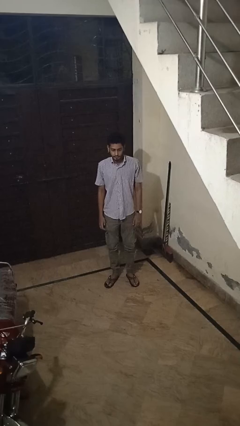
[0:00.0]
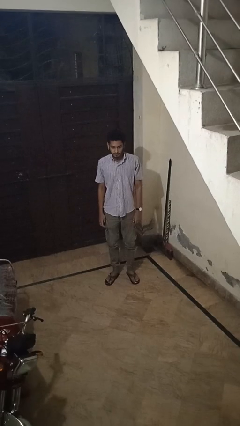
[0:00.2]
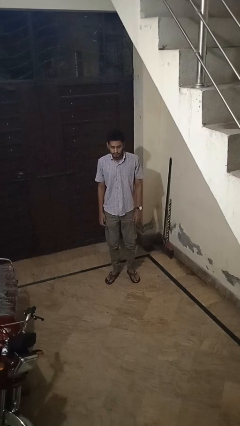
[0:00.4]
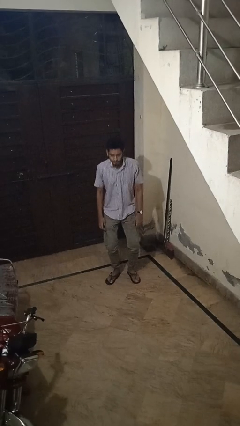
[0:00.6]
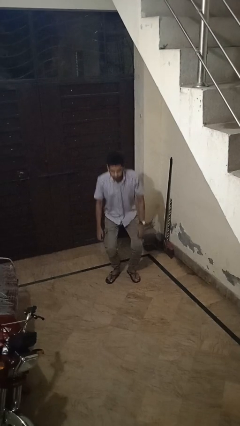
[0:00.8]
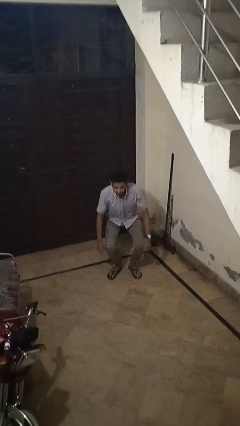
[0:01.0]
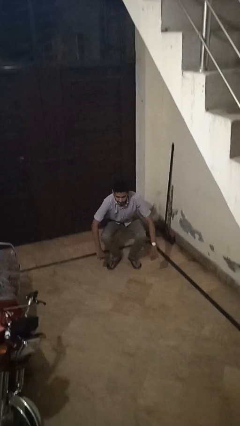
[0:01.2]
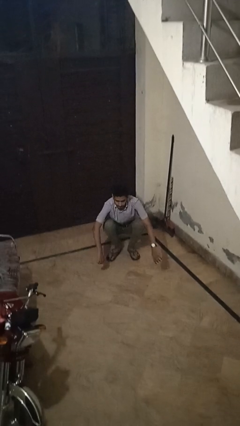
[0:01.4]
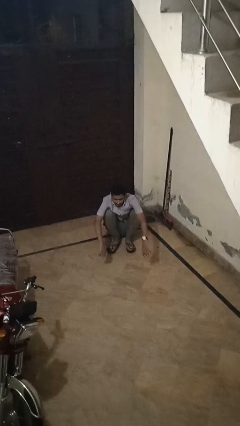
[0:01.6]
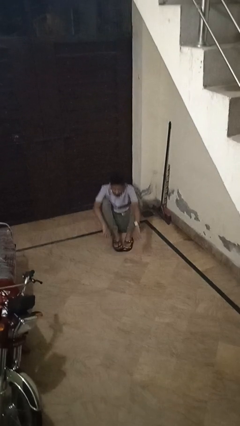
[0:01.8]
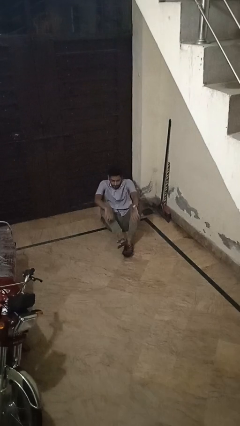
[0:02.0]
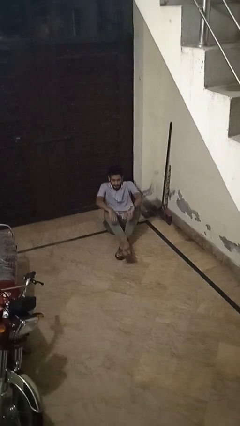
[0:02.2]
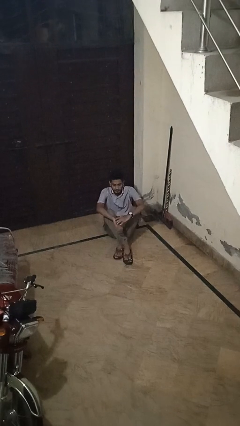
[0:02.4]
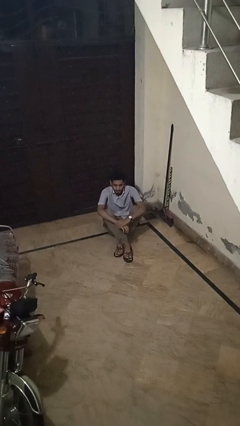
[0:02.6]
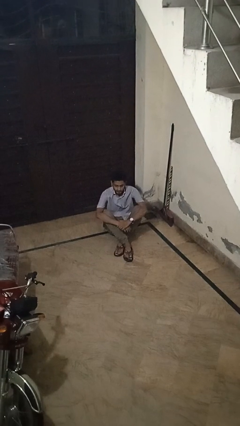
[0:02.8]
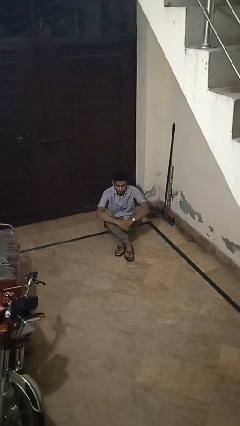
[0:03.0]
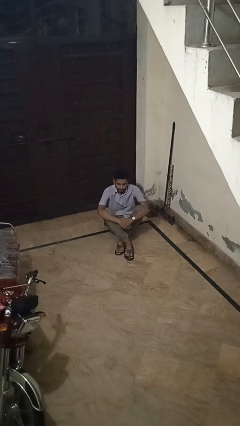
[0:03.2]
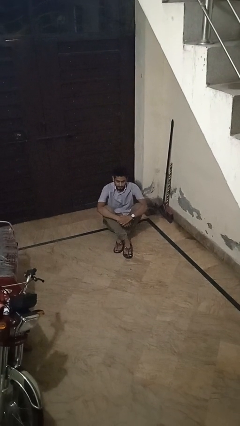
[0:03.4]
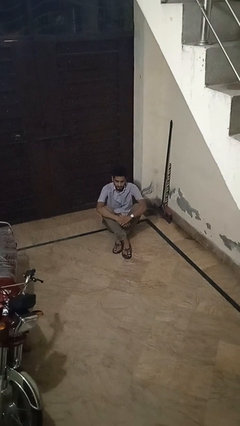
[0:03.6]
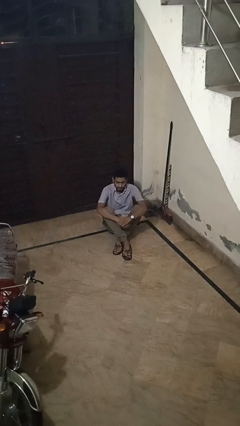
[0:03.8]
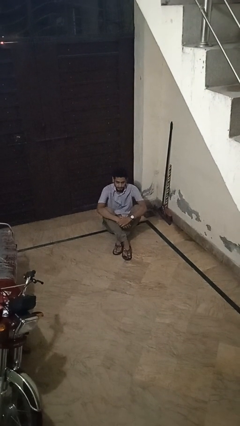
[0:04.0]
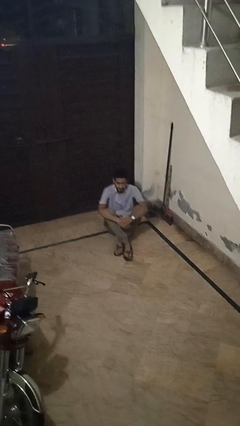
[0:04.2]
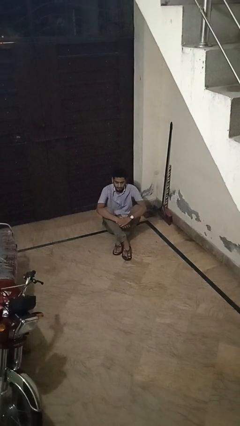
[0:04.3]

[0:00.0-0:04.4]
person sits crisscross

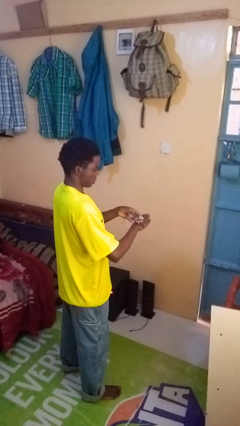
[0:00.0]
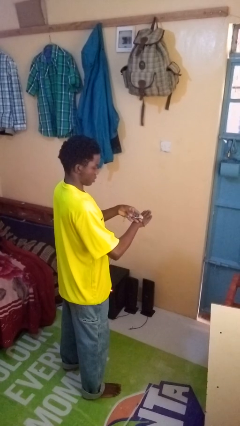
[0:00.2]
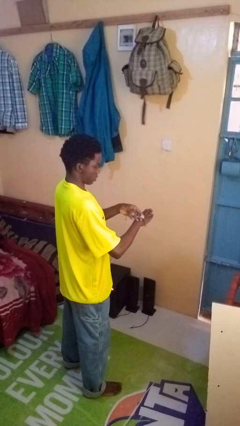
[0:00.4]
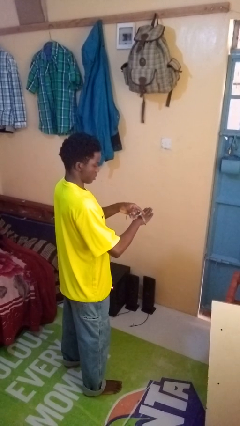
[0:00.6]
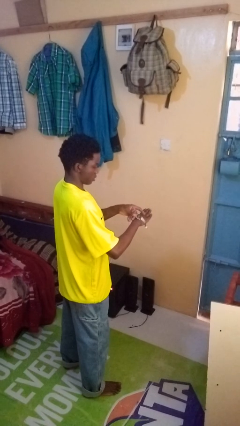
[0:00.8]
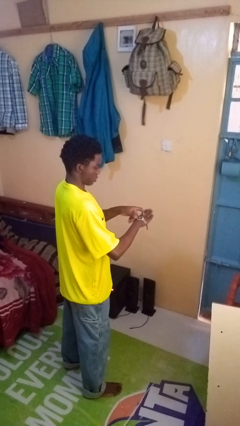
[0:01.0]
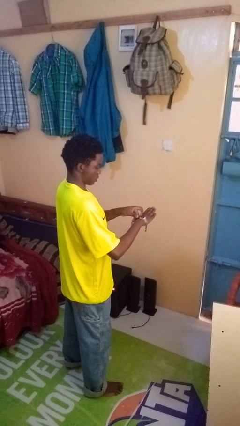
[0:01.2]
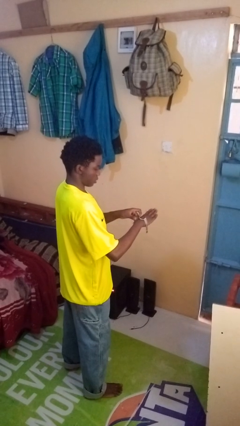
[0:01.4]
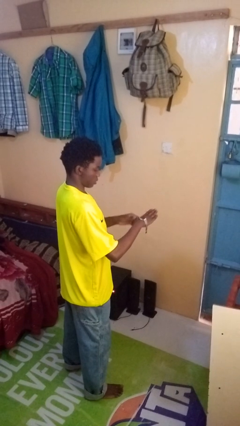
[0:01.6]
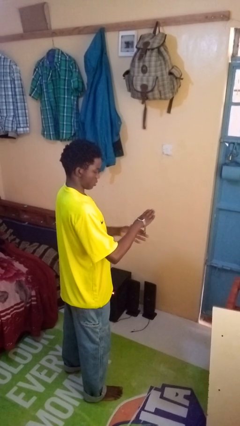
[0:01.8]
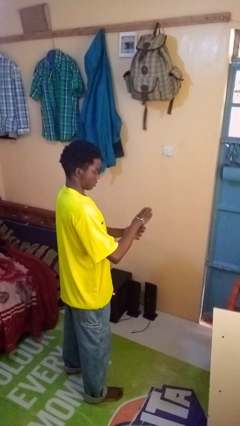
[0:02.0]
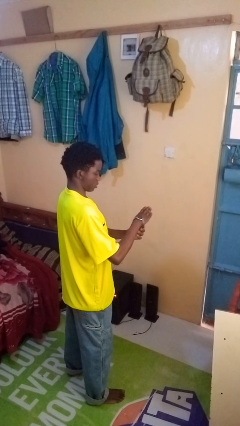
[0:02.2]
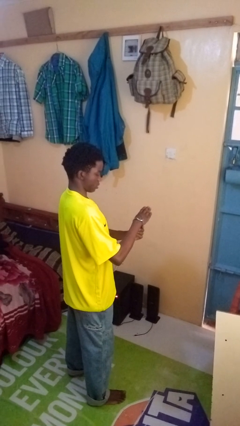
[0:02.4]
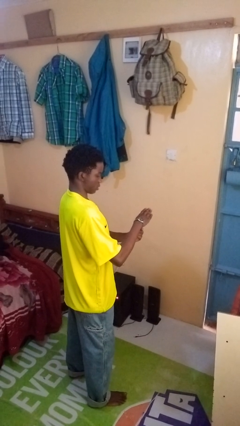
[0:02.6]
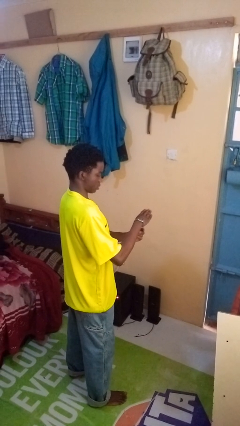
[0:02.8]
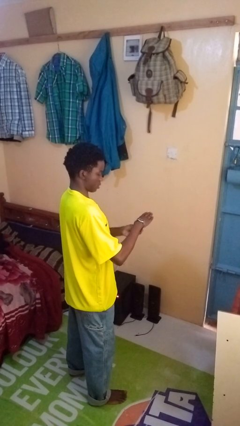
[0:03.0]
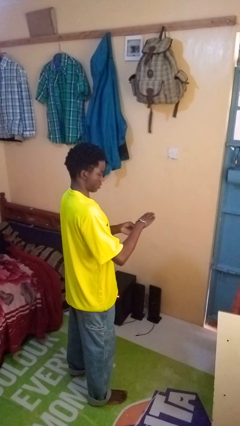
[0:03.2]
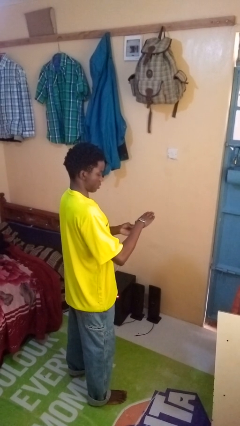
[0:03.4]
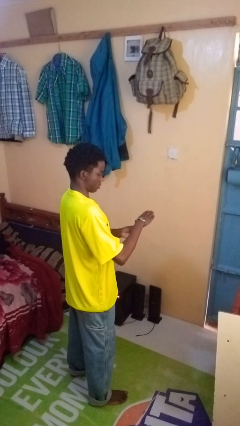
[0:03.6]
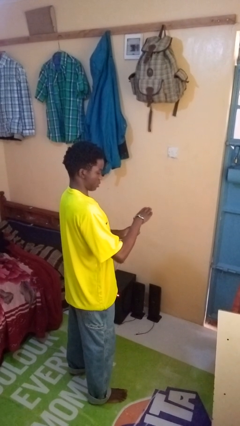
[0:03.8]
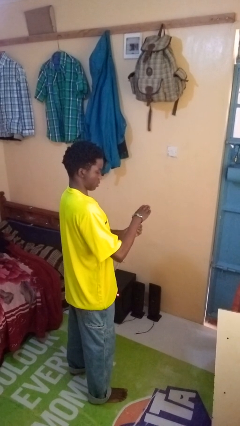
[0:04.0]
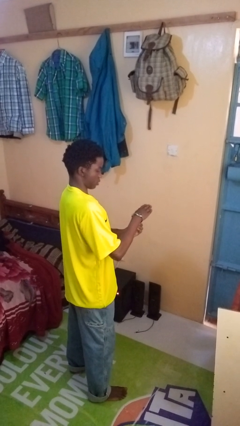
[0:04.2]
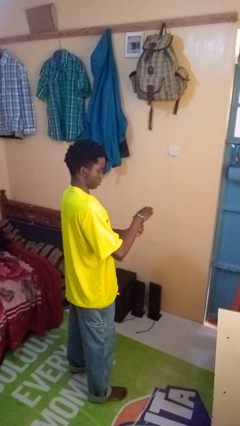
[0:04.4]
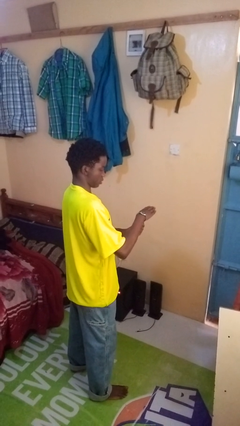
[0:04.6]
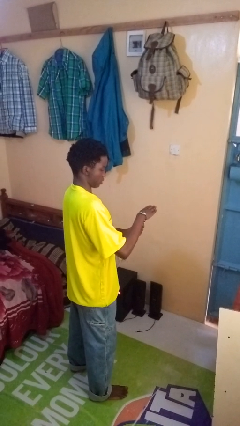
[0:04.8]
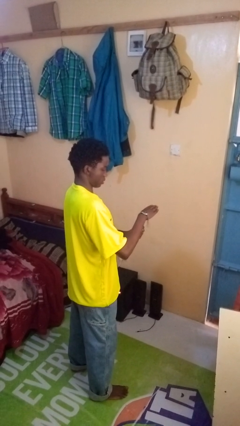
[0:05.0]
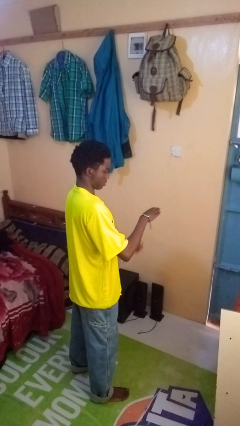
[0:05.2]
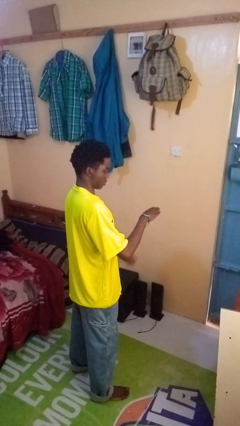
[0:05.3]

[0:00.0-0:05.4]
person puts on wristwatch

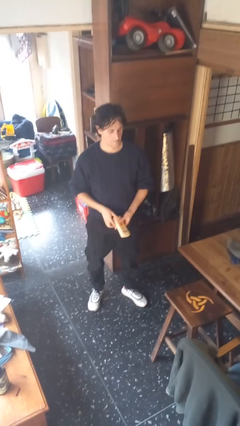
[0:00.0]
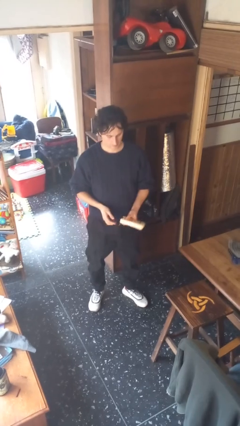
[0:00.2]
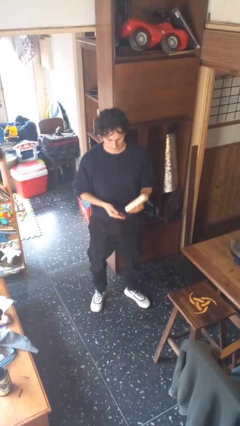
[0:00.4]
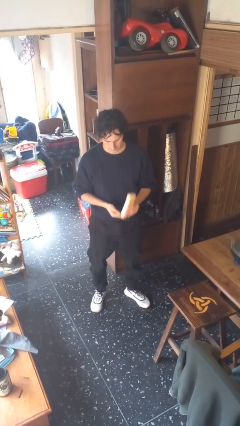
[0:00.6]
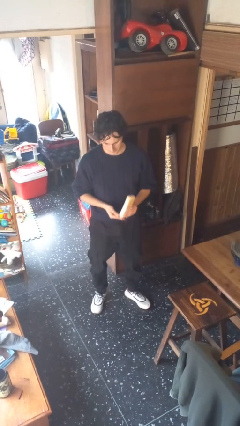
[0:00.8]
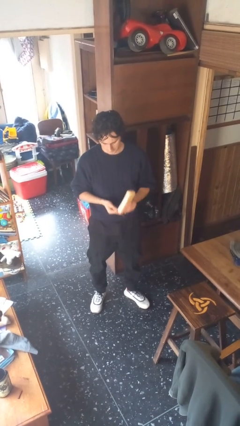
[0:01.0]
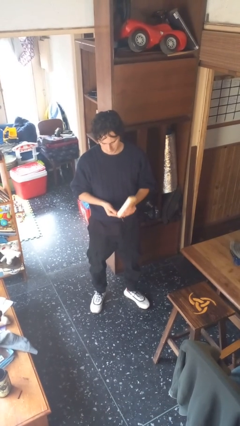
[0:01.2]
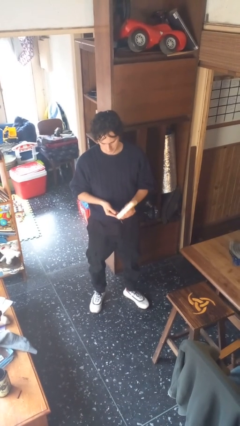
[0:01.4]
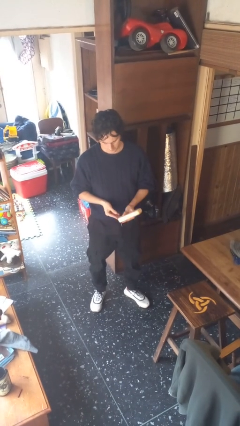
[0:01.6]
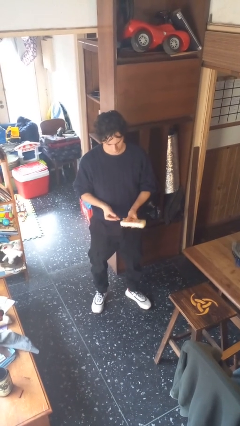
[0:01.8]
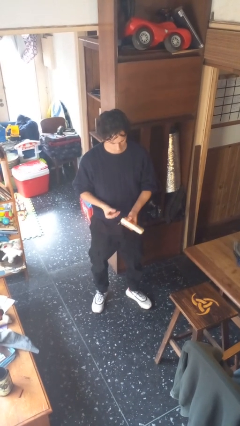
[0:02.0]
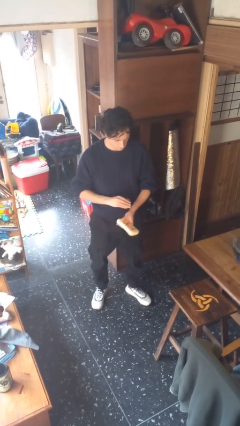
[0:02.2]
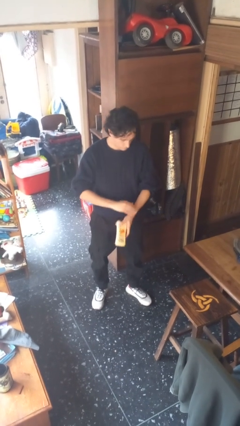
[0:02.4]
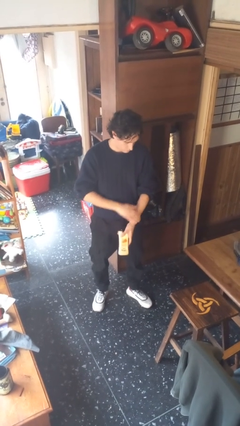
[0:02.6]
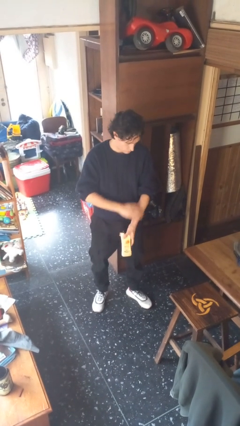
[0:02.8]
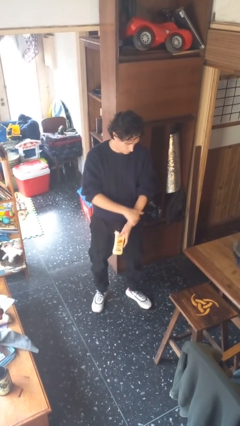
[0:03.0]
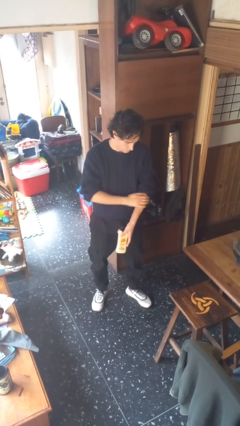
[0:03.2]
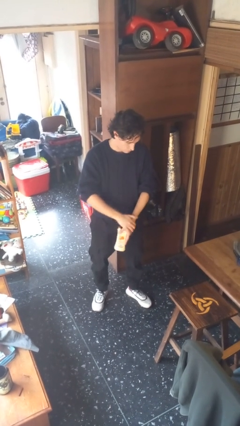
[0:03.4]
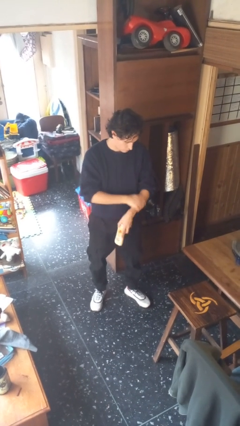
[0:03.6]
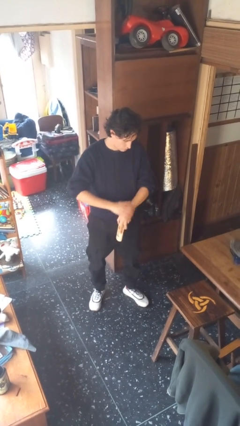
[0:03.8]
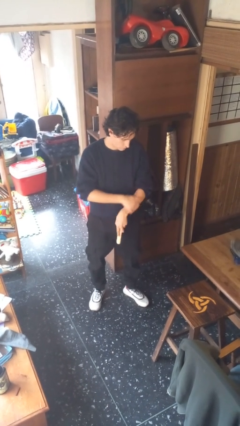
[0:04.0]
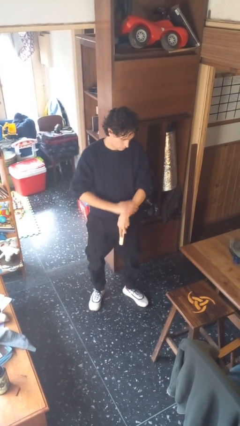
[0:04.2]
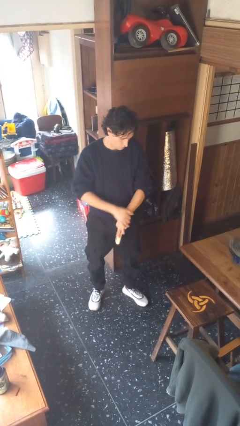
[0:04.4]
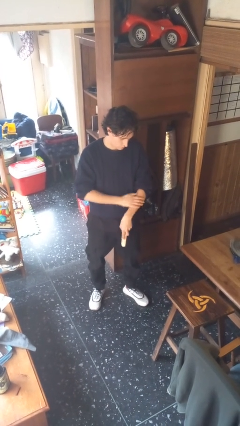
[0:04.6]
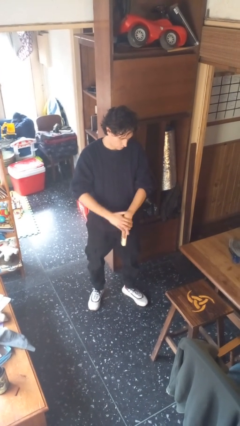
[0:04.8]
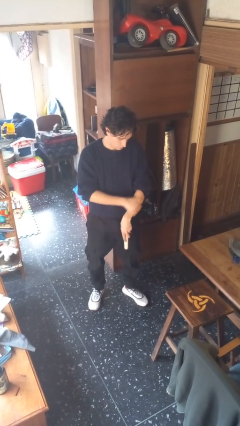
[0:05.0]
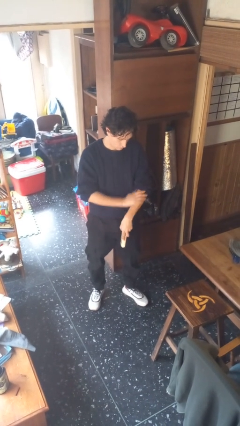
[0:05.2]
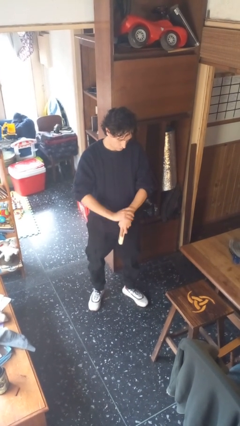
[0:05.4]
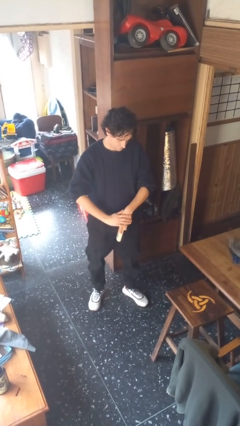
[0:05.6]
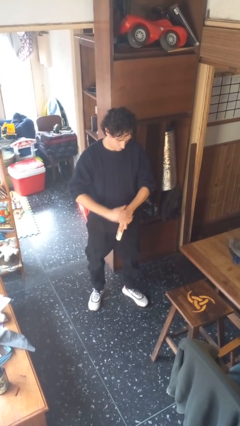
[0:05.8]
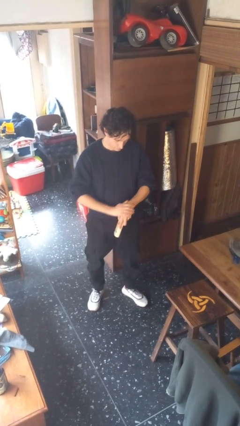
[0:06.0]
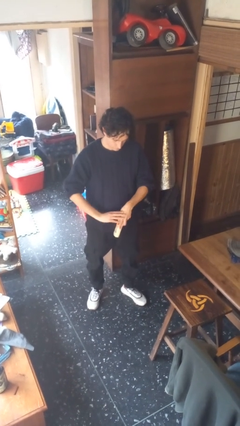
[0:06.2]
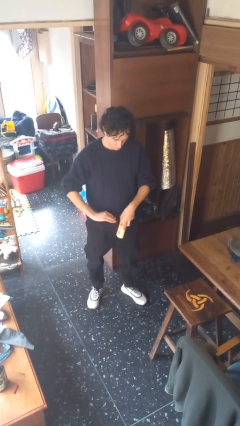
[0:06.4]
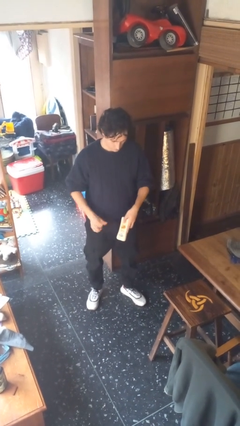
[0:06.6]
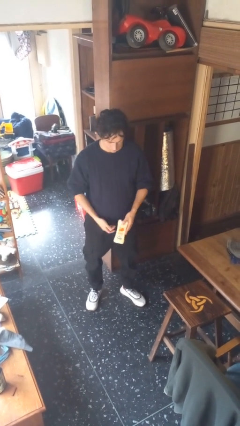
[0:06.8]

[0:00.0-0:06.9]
person applies sunscreen

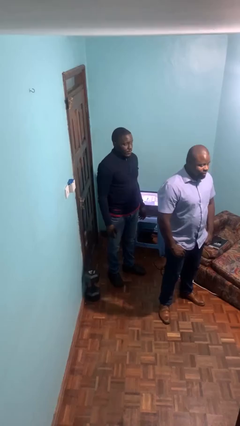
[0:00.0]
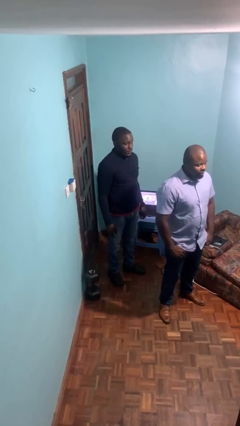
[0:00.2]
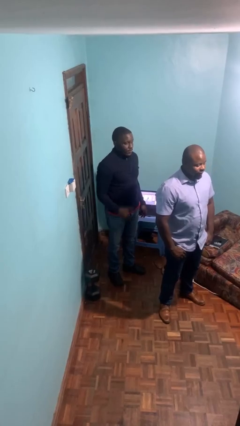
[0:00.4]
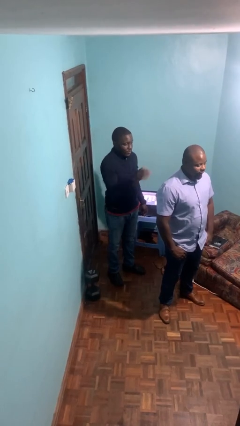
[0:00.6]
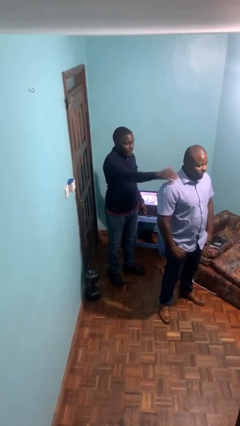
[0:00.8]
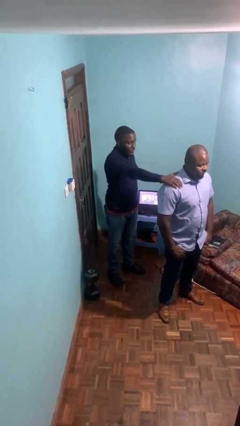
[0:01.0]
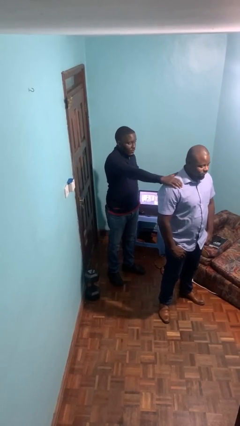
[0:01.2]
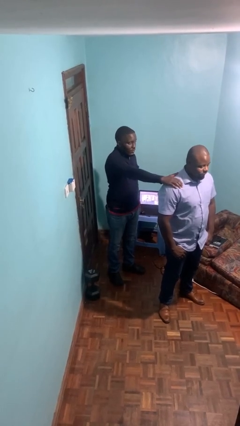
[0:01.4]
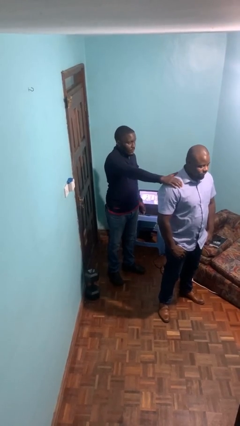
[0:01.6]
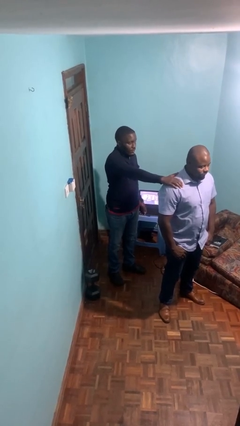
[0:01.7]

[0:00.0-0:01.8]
person grabs person by shoulder
